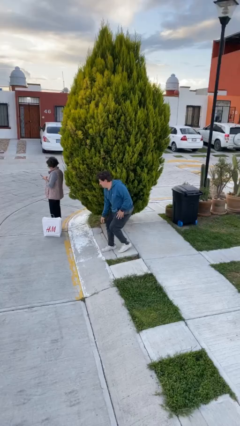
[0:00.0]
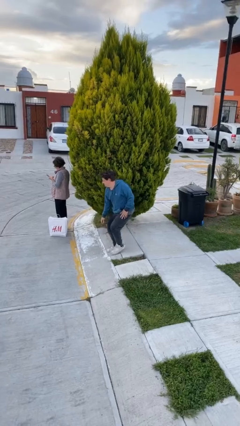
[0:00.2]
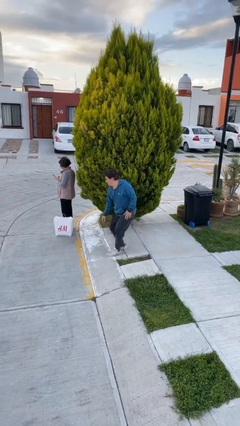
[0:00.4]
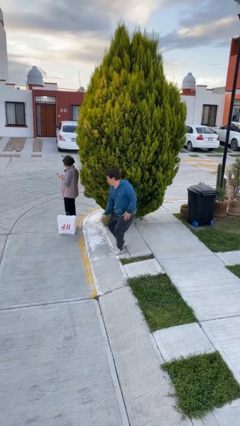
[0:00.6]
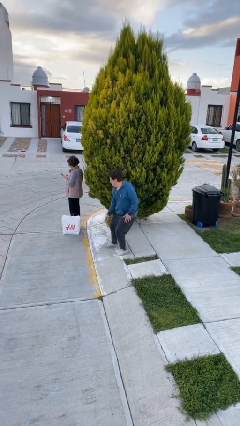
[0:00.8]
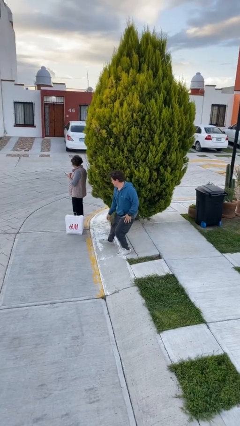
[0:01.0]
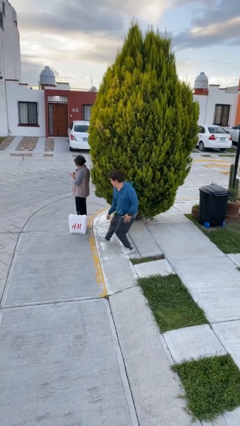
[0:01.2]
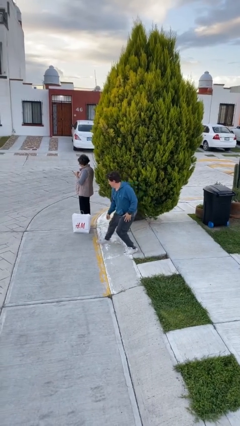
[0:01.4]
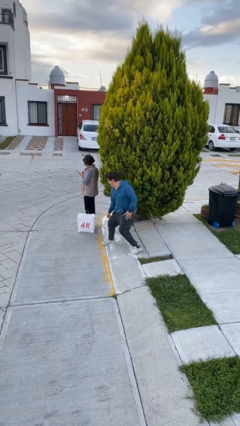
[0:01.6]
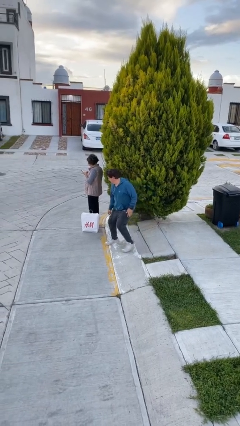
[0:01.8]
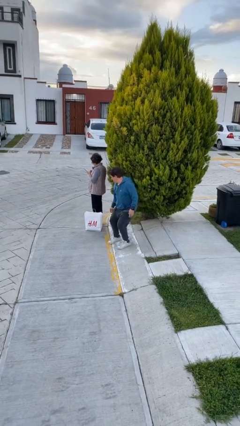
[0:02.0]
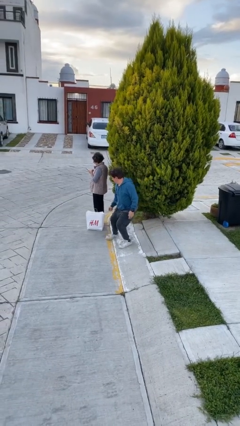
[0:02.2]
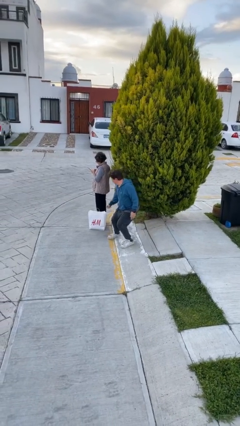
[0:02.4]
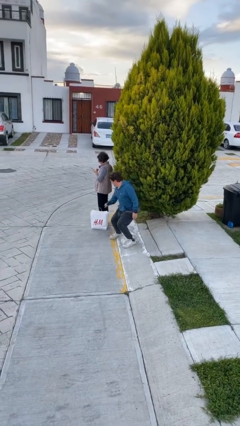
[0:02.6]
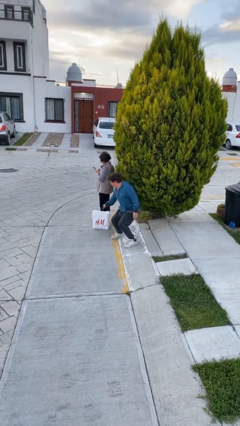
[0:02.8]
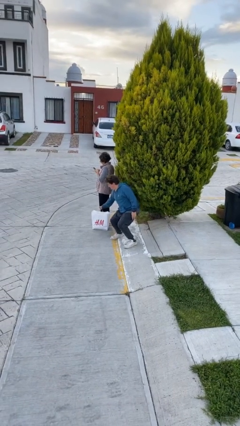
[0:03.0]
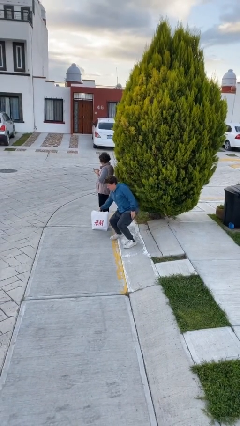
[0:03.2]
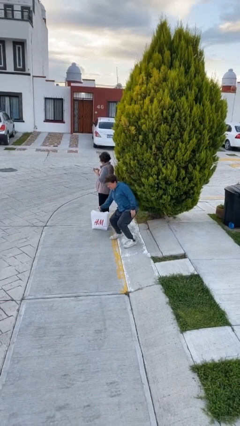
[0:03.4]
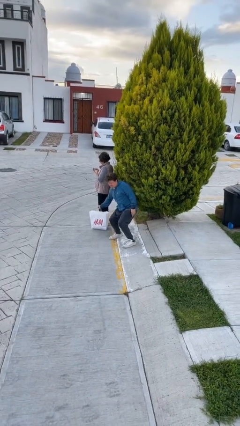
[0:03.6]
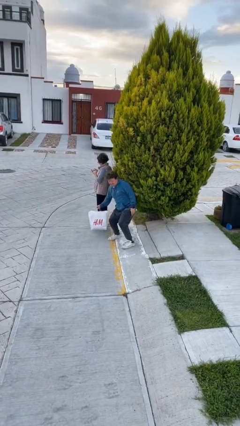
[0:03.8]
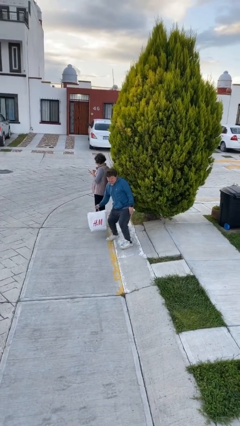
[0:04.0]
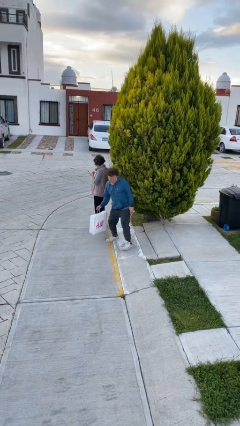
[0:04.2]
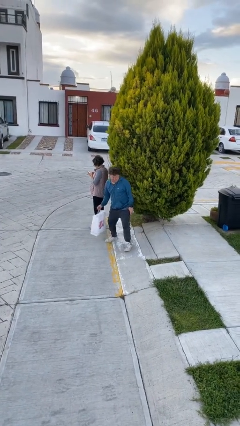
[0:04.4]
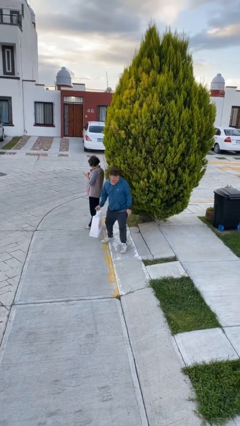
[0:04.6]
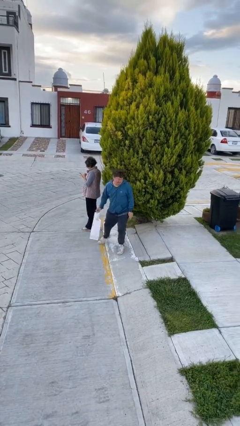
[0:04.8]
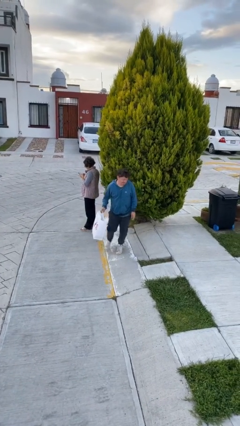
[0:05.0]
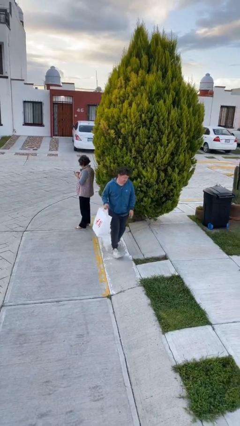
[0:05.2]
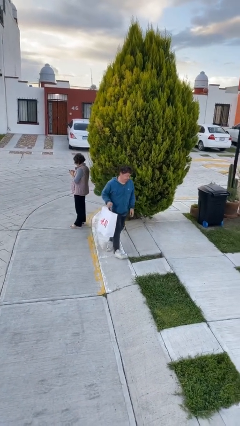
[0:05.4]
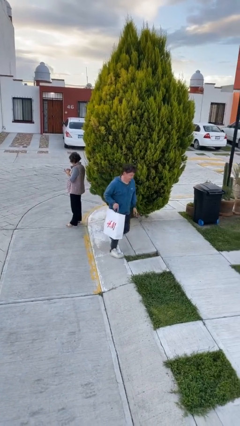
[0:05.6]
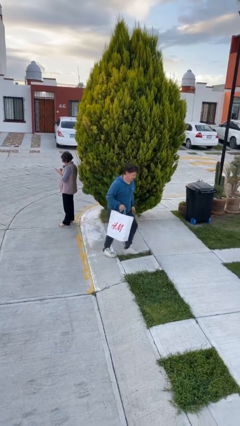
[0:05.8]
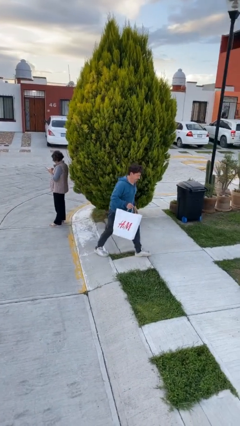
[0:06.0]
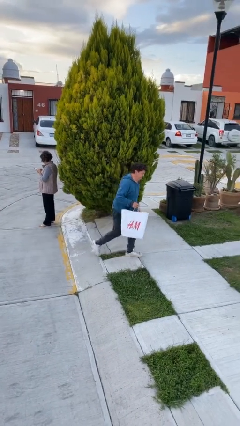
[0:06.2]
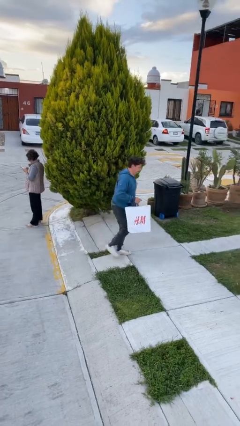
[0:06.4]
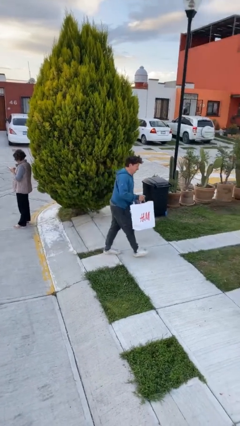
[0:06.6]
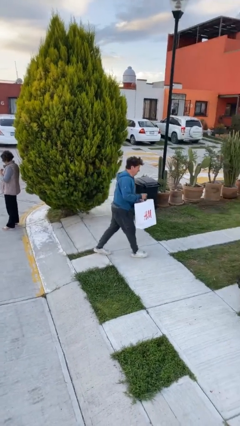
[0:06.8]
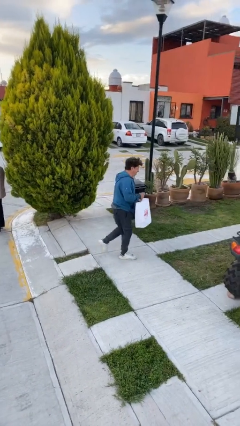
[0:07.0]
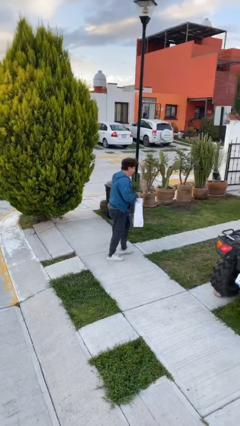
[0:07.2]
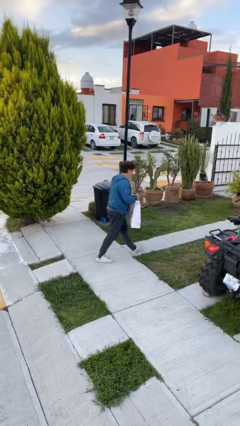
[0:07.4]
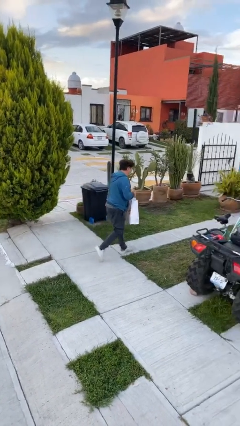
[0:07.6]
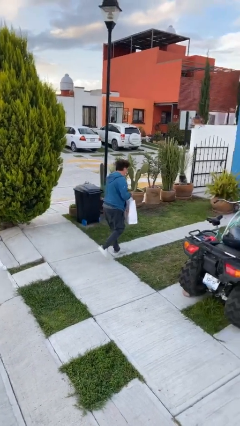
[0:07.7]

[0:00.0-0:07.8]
person steals object from person

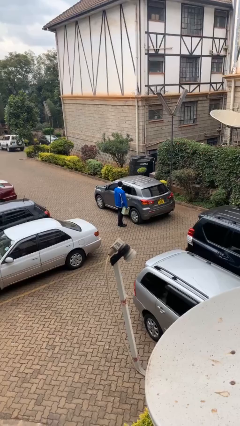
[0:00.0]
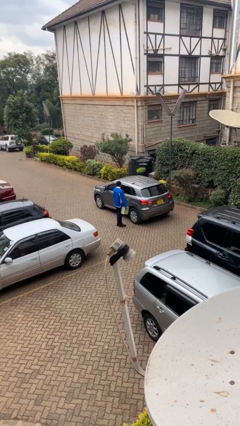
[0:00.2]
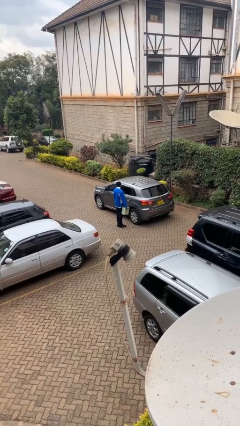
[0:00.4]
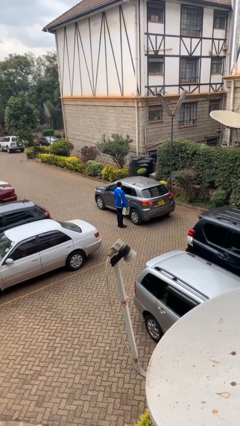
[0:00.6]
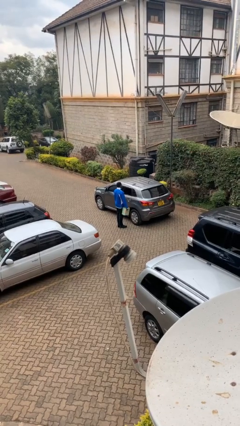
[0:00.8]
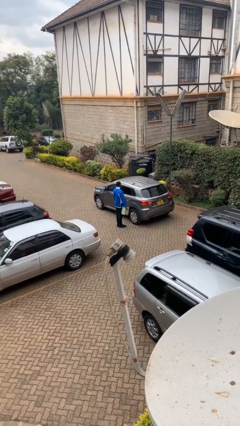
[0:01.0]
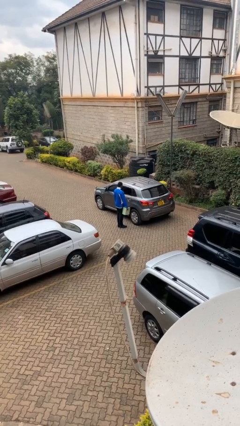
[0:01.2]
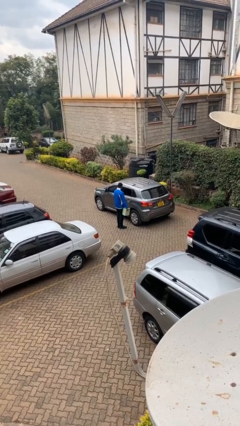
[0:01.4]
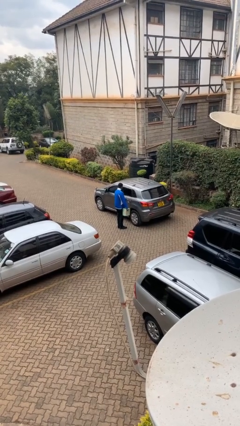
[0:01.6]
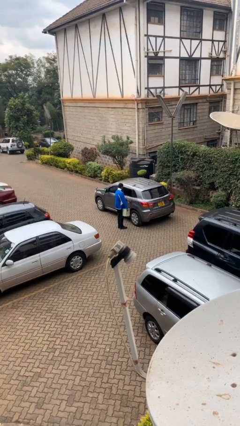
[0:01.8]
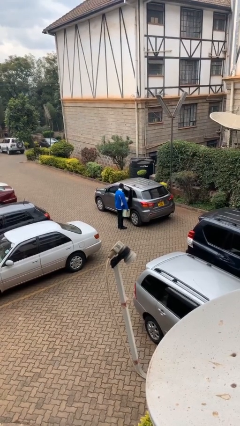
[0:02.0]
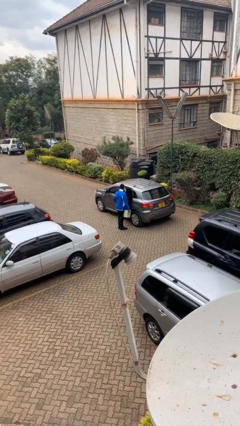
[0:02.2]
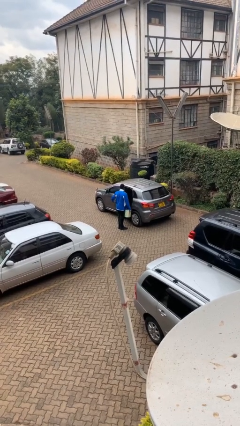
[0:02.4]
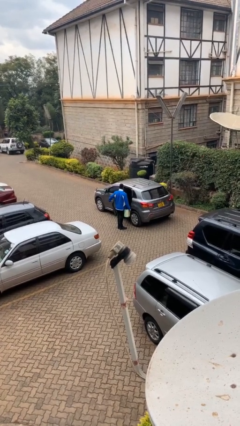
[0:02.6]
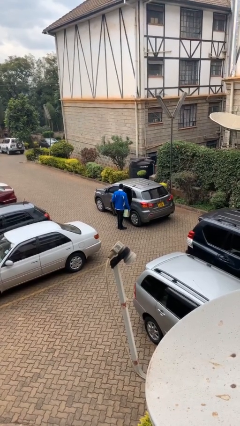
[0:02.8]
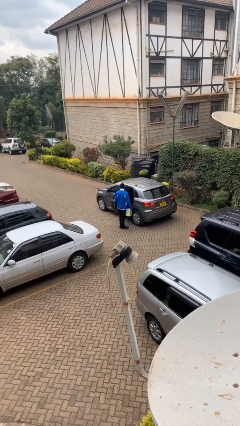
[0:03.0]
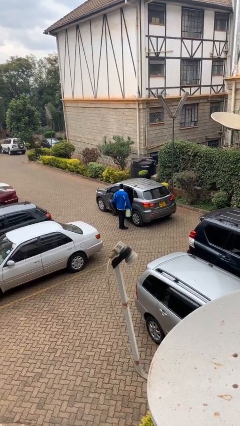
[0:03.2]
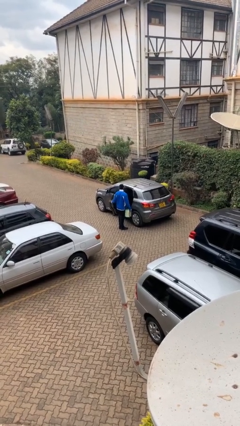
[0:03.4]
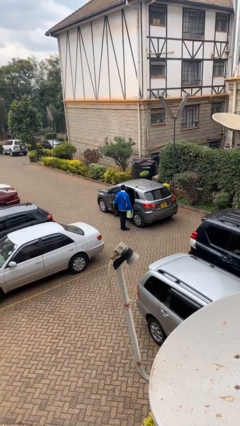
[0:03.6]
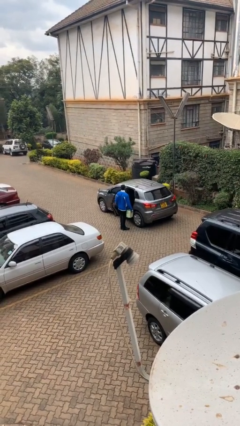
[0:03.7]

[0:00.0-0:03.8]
person opens car door

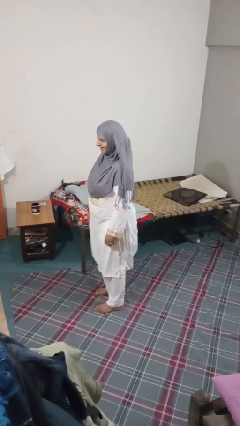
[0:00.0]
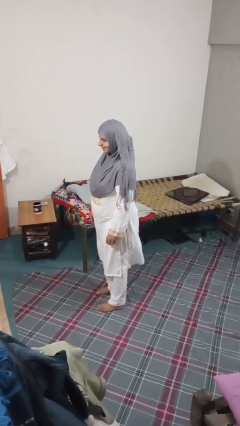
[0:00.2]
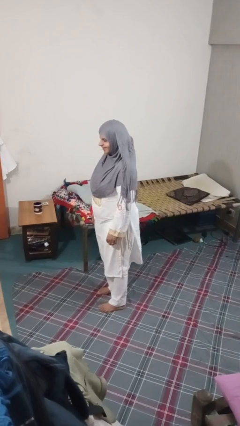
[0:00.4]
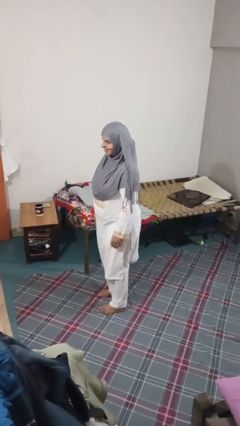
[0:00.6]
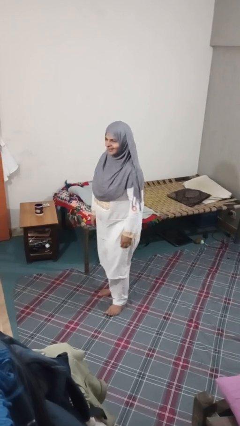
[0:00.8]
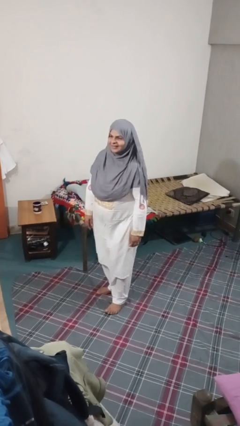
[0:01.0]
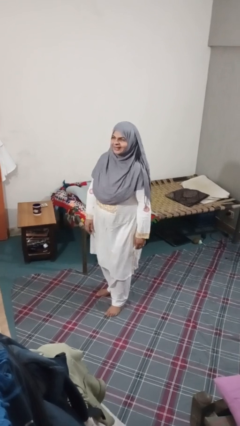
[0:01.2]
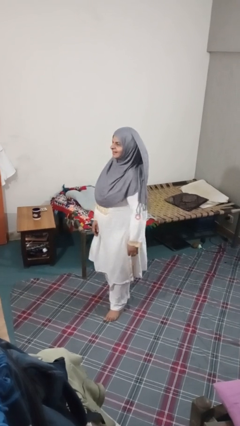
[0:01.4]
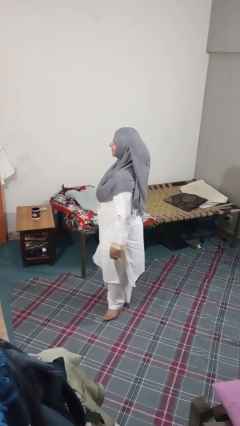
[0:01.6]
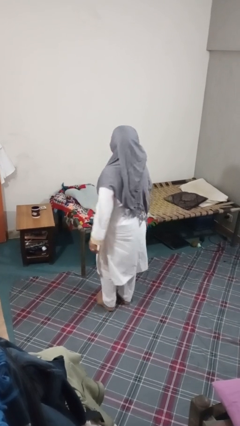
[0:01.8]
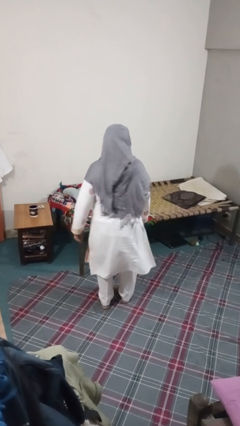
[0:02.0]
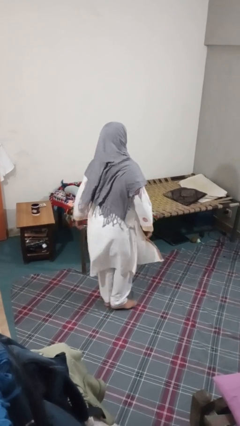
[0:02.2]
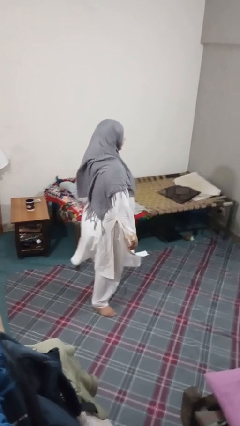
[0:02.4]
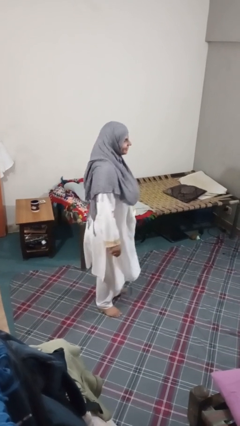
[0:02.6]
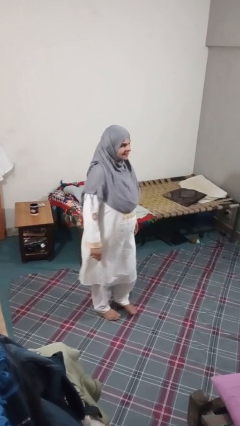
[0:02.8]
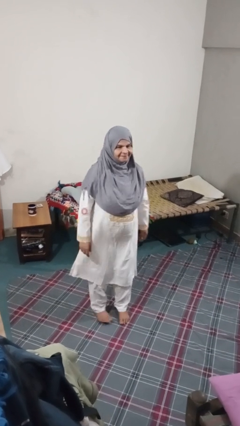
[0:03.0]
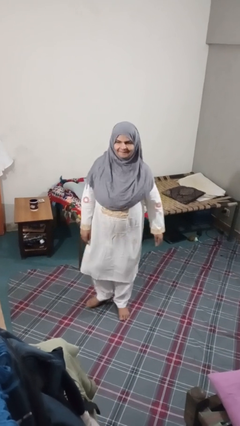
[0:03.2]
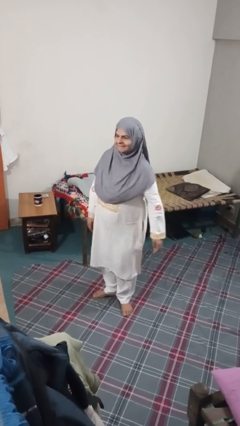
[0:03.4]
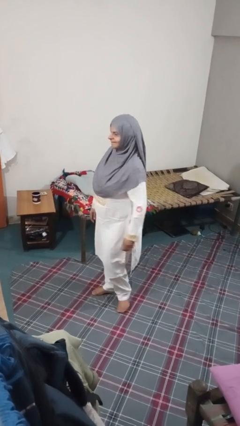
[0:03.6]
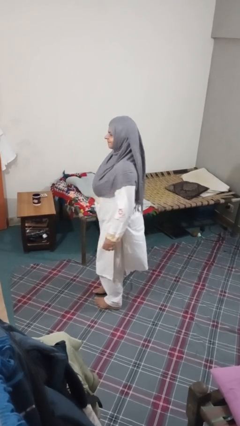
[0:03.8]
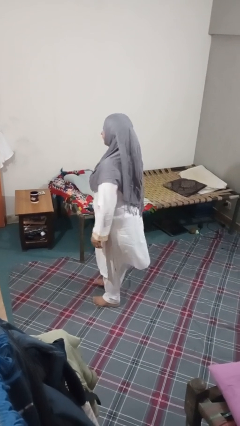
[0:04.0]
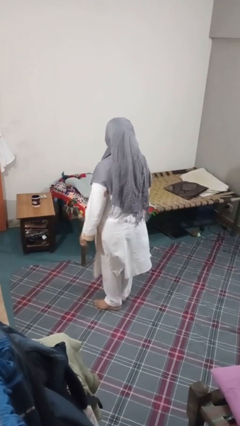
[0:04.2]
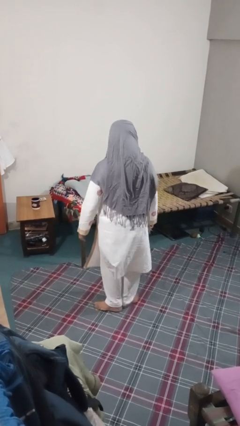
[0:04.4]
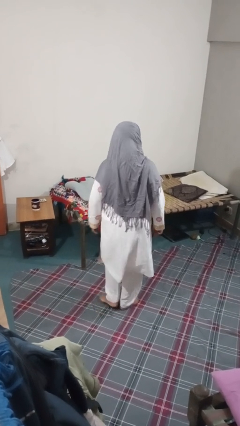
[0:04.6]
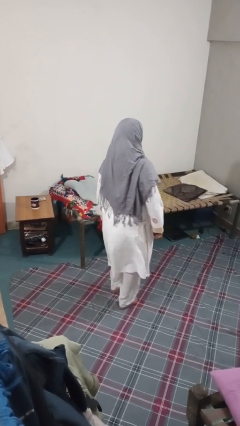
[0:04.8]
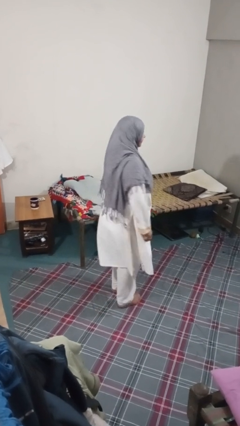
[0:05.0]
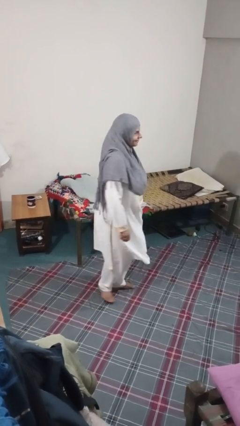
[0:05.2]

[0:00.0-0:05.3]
person twirls

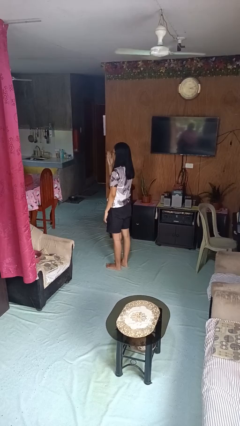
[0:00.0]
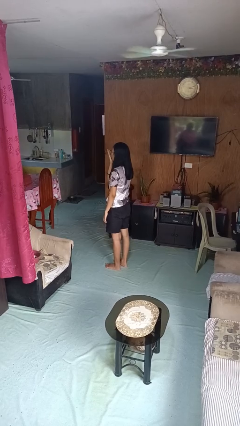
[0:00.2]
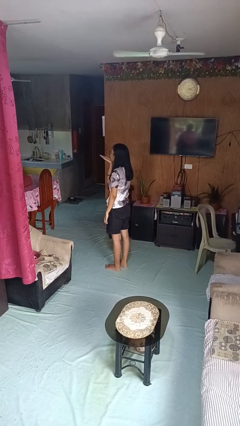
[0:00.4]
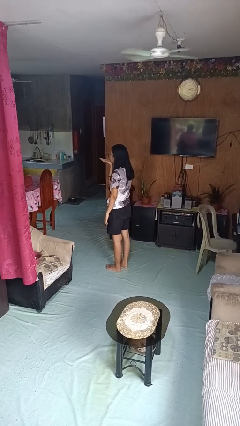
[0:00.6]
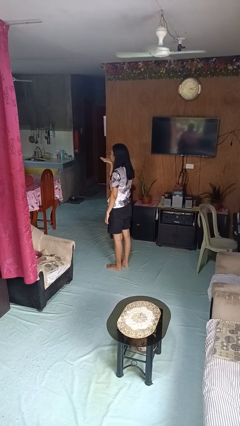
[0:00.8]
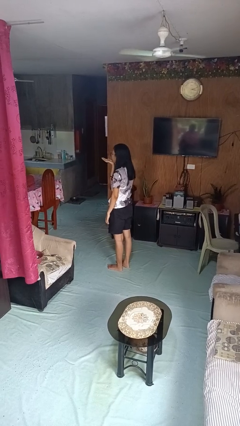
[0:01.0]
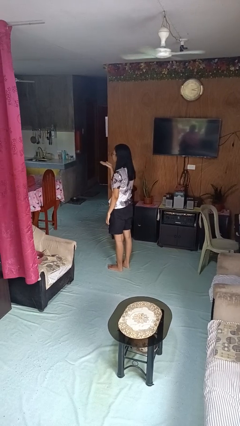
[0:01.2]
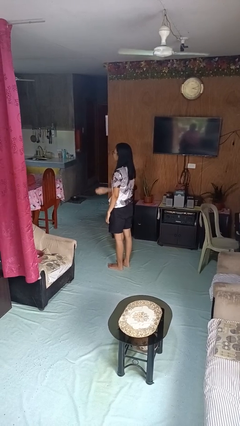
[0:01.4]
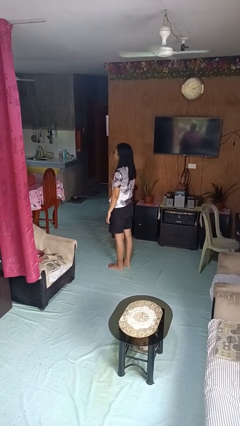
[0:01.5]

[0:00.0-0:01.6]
person gestures blow kiss

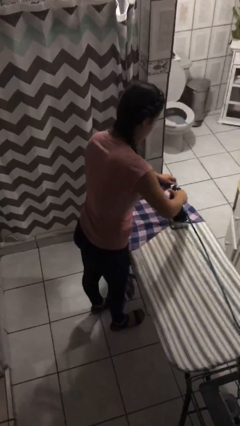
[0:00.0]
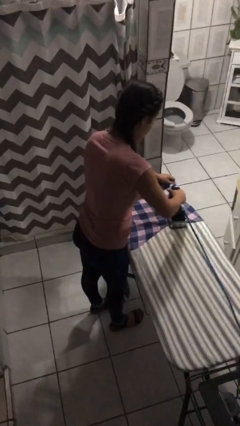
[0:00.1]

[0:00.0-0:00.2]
person irons clothes
